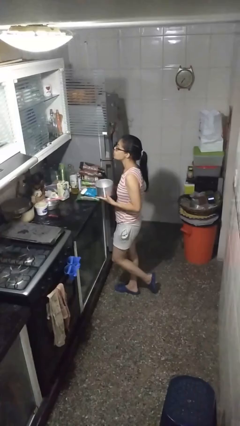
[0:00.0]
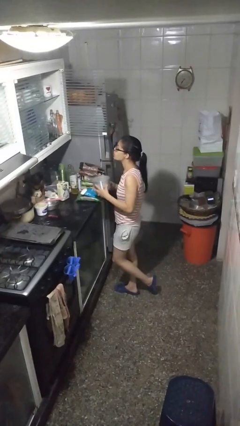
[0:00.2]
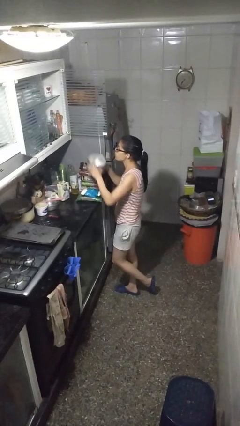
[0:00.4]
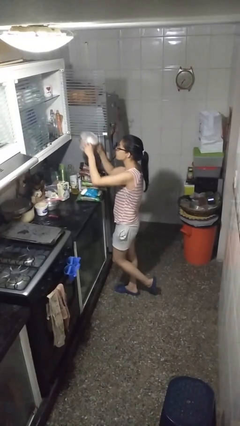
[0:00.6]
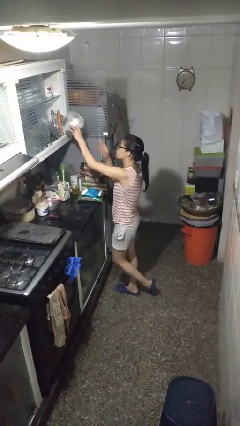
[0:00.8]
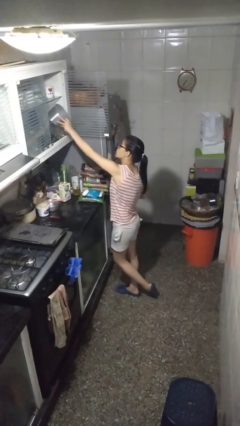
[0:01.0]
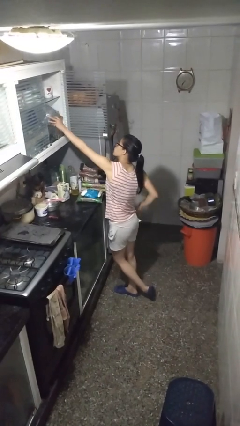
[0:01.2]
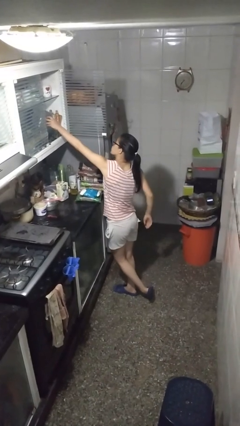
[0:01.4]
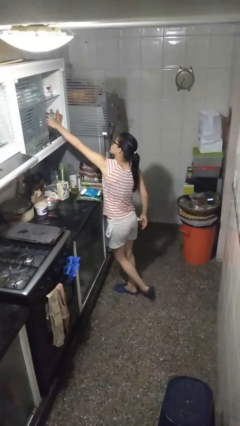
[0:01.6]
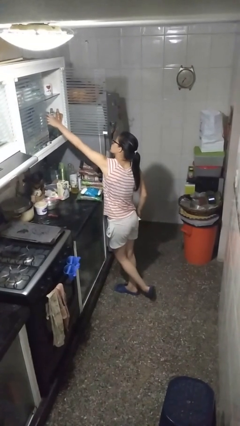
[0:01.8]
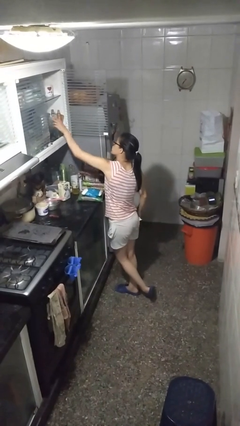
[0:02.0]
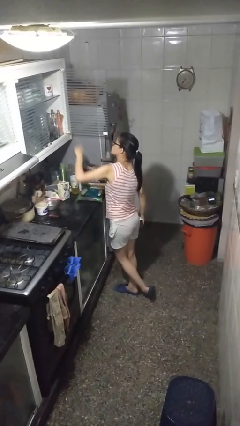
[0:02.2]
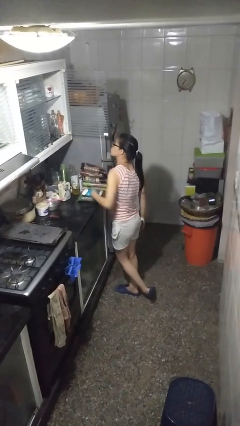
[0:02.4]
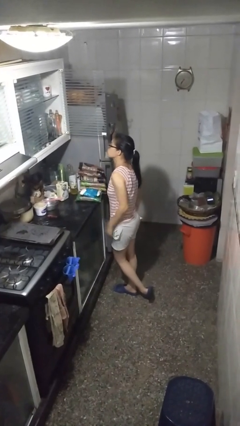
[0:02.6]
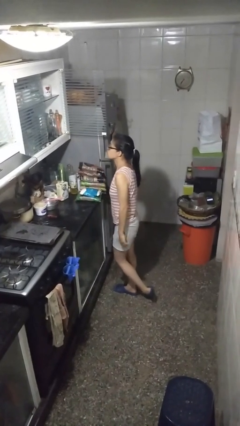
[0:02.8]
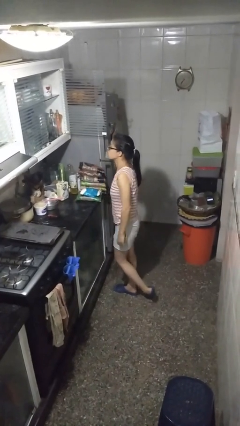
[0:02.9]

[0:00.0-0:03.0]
person puts down object into cabinet

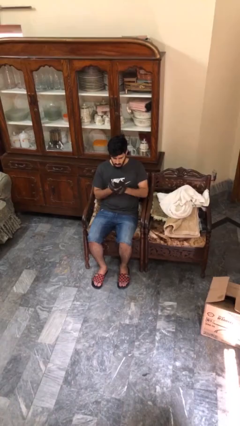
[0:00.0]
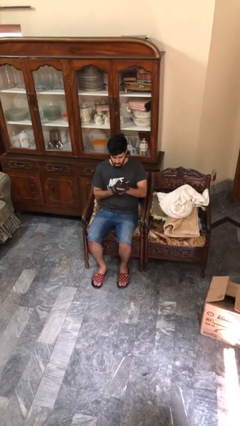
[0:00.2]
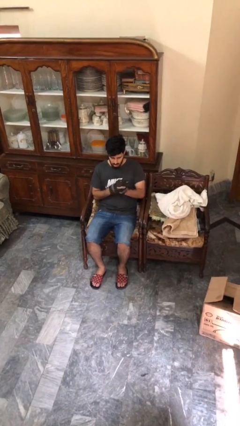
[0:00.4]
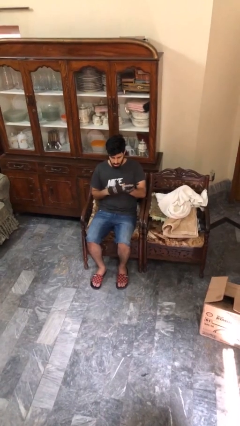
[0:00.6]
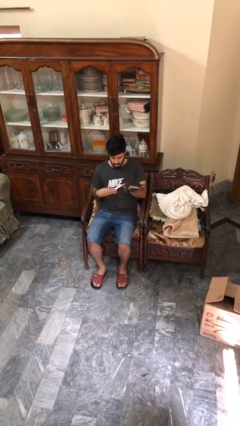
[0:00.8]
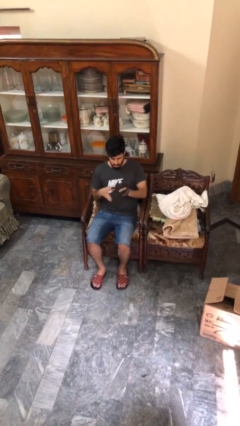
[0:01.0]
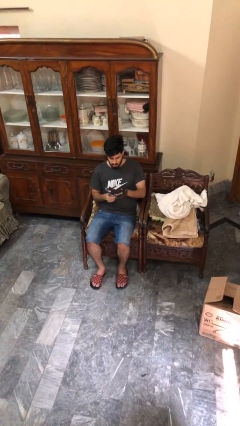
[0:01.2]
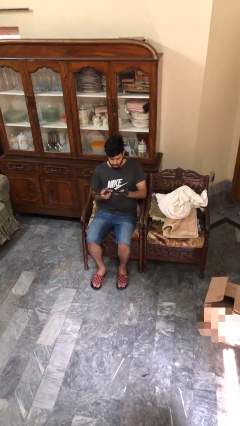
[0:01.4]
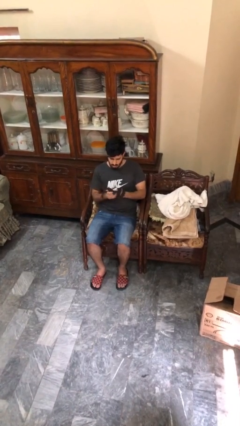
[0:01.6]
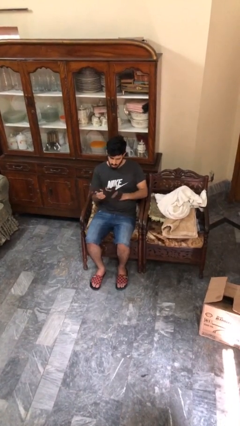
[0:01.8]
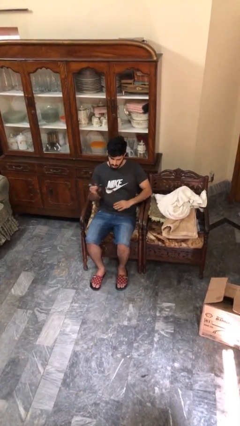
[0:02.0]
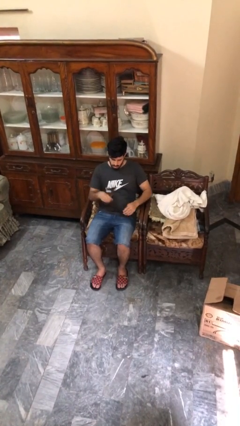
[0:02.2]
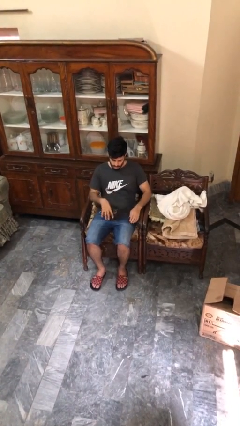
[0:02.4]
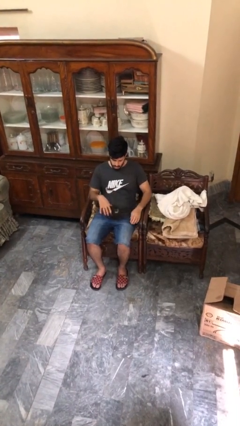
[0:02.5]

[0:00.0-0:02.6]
person takes off gloves

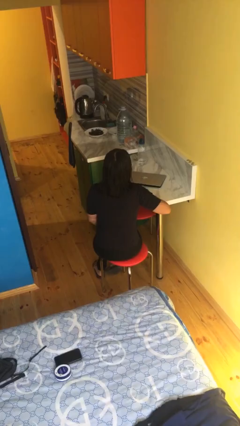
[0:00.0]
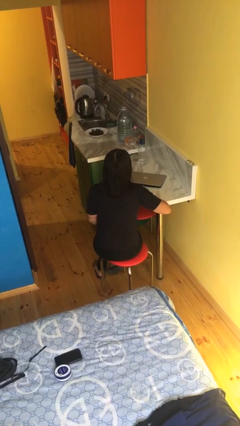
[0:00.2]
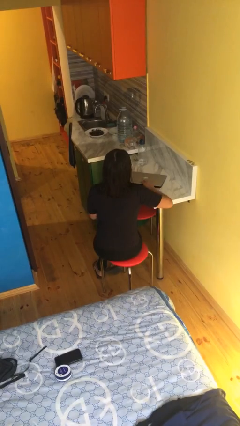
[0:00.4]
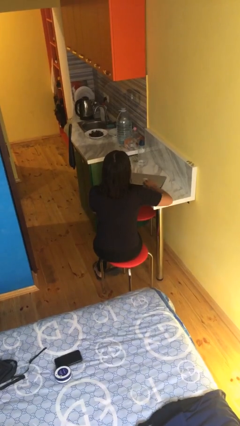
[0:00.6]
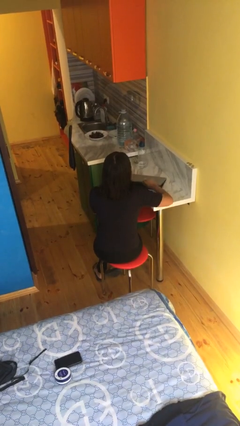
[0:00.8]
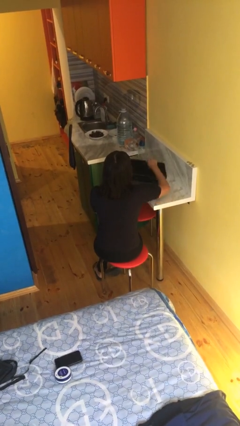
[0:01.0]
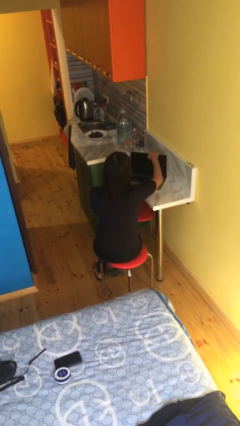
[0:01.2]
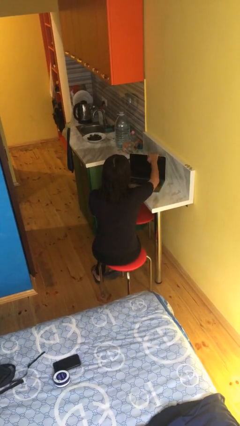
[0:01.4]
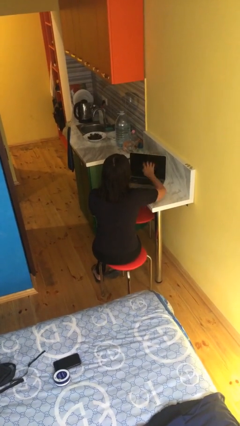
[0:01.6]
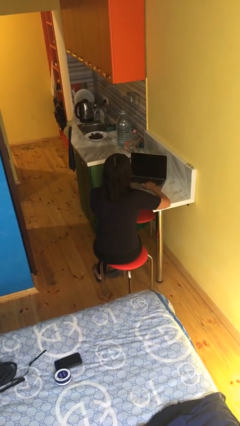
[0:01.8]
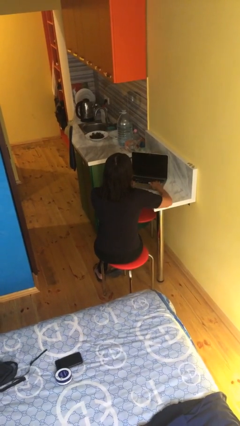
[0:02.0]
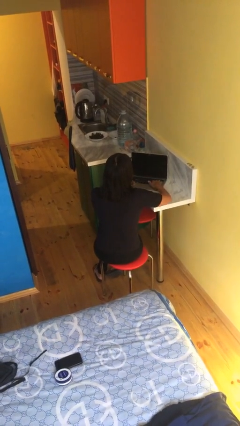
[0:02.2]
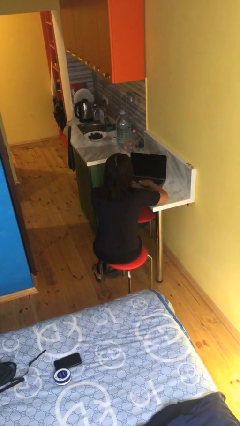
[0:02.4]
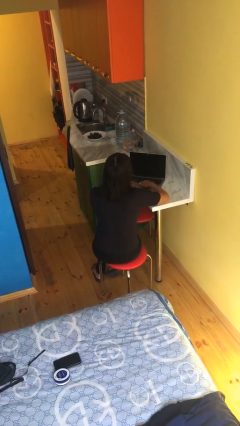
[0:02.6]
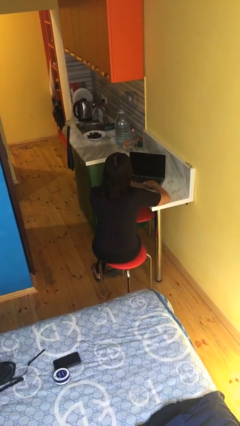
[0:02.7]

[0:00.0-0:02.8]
person opens laptop

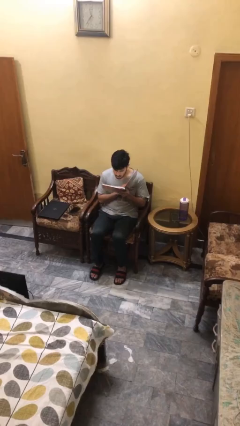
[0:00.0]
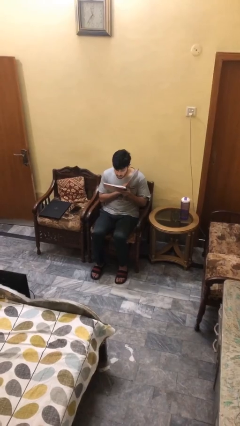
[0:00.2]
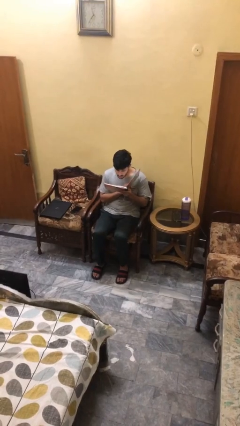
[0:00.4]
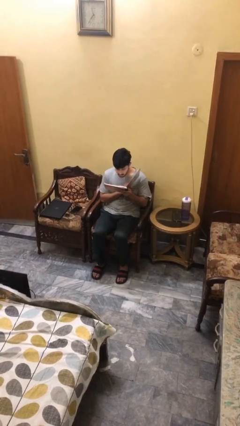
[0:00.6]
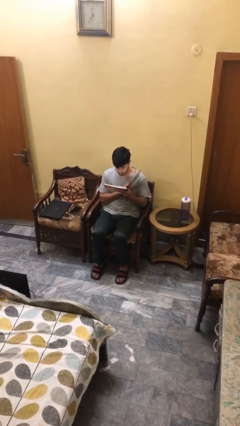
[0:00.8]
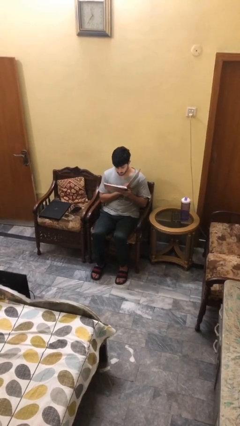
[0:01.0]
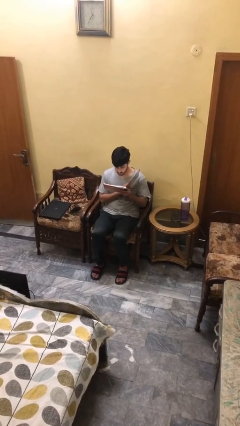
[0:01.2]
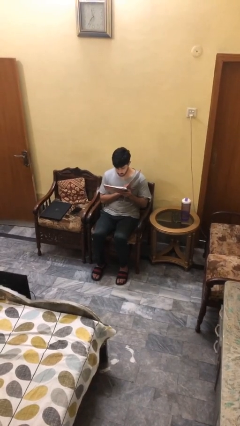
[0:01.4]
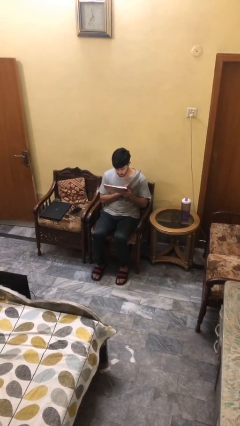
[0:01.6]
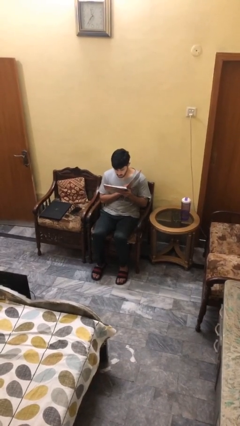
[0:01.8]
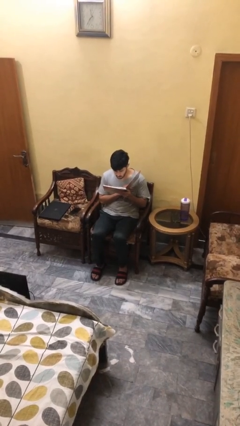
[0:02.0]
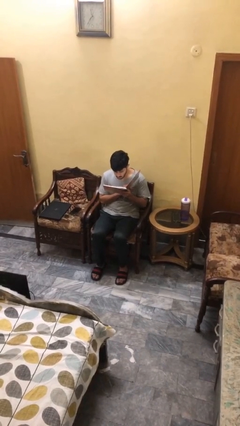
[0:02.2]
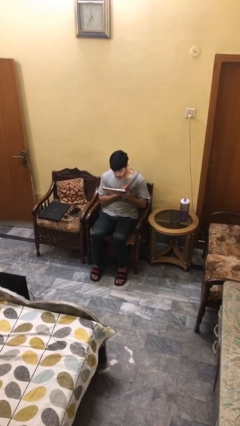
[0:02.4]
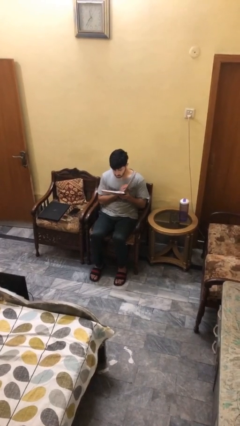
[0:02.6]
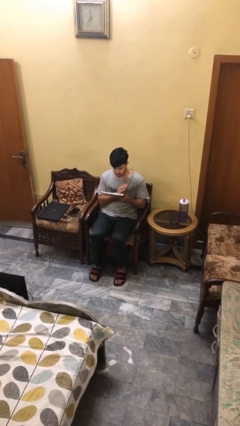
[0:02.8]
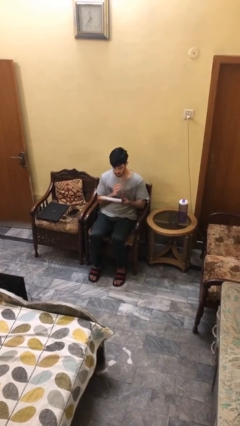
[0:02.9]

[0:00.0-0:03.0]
person reads document

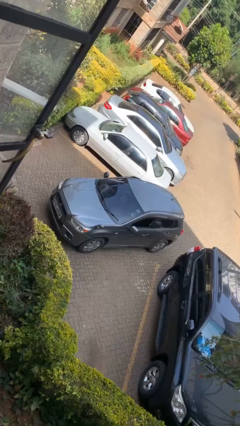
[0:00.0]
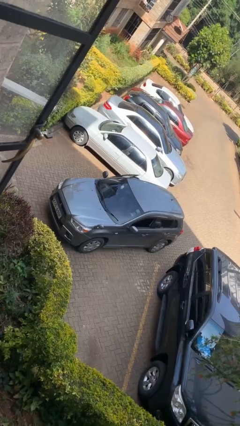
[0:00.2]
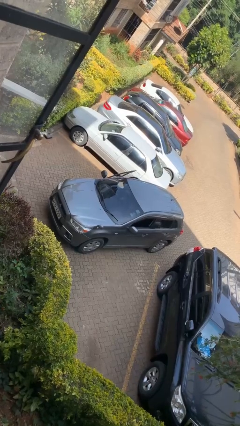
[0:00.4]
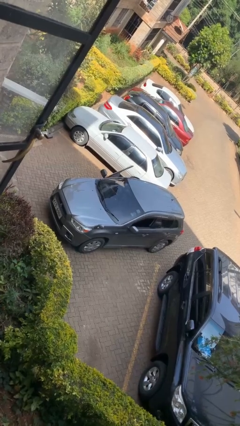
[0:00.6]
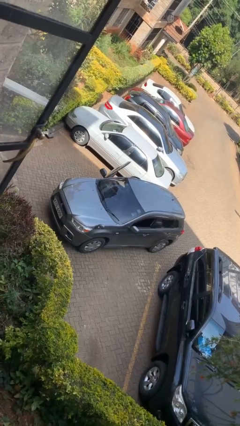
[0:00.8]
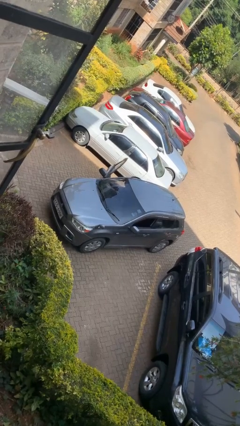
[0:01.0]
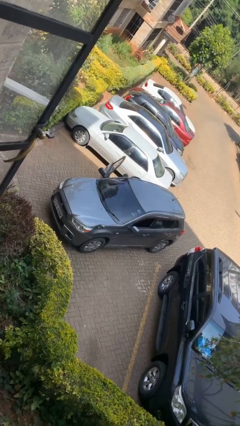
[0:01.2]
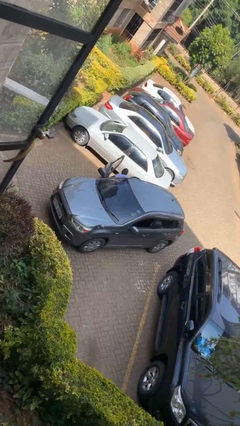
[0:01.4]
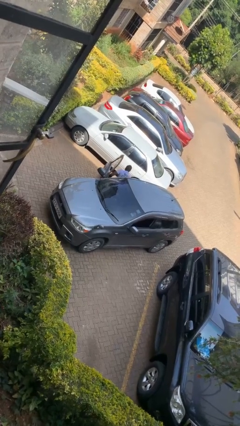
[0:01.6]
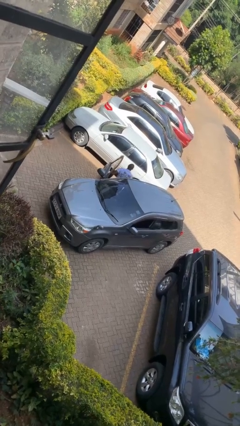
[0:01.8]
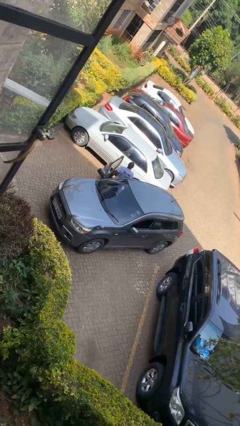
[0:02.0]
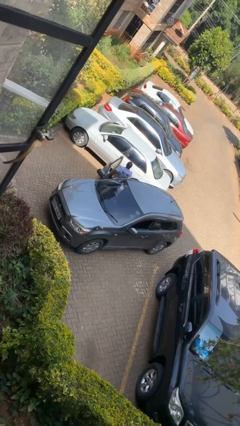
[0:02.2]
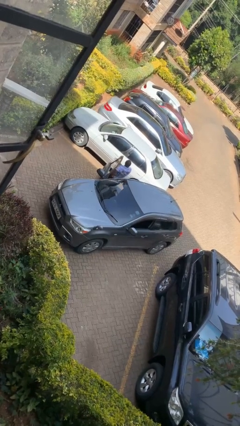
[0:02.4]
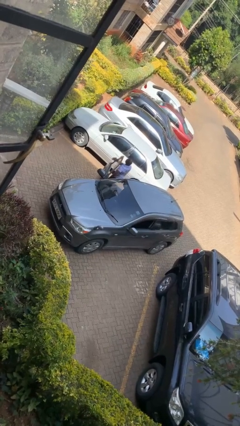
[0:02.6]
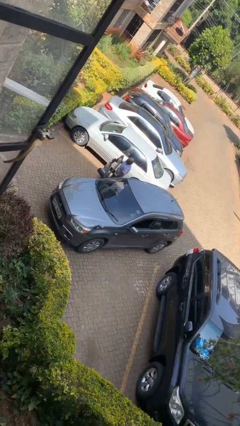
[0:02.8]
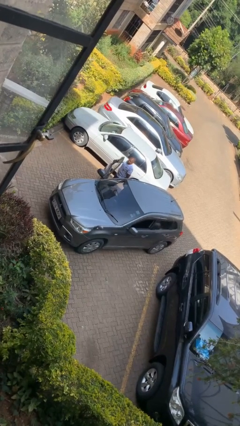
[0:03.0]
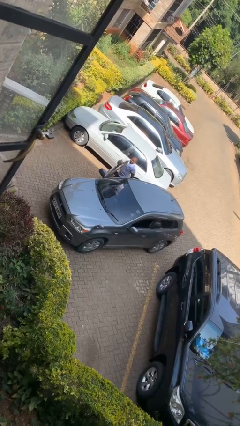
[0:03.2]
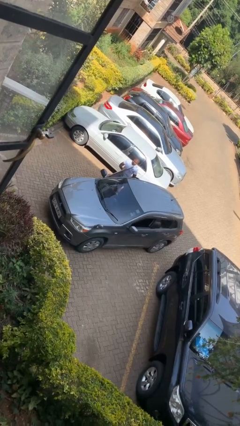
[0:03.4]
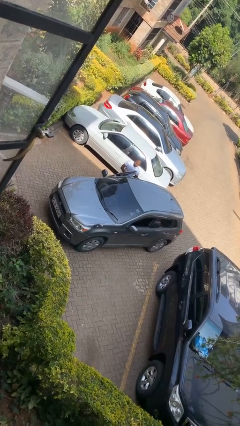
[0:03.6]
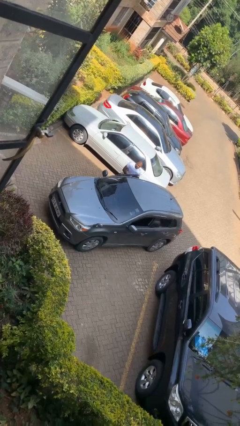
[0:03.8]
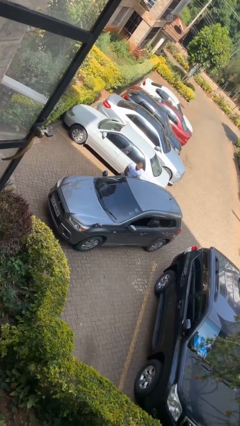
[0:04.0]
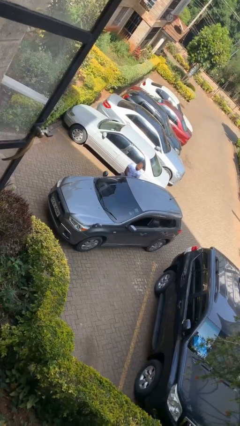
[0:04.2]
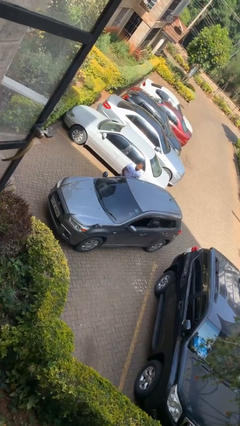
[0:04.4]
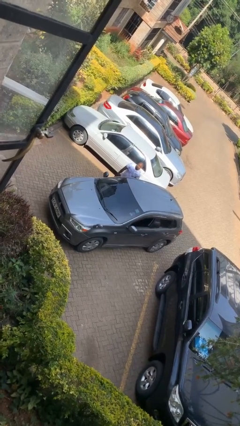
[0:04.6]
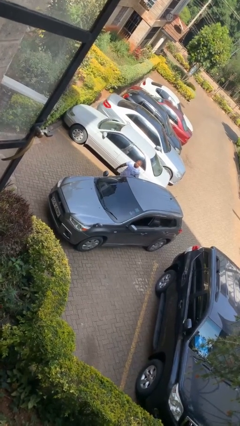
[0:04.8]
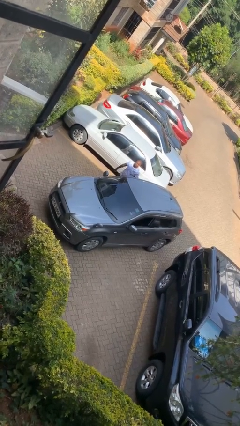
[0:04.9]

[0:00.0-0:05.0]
car drops off person

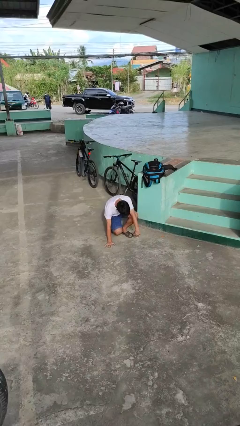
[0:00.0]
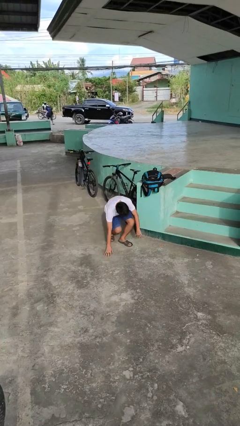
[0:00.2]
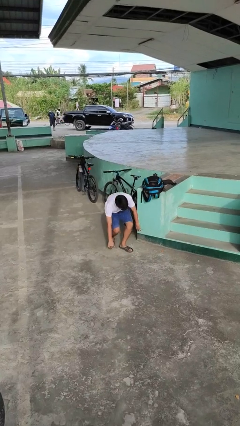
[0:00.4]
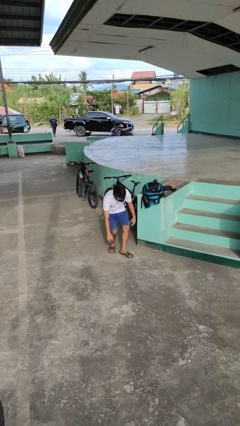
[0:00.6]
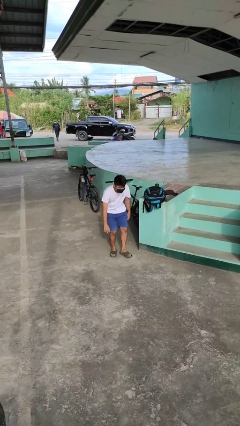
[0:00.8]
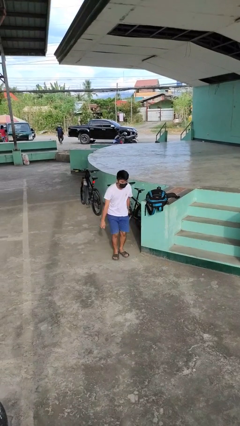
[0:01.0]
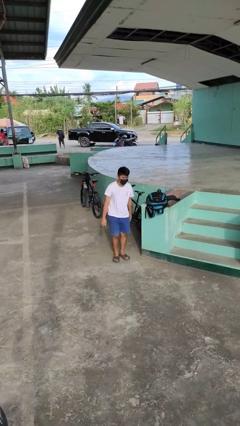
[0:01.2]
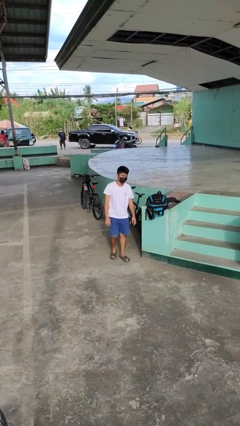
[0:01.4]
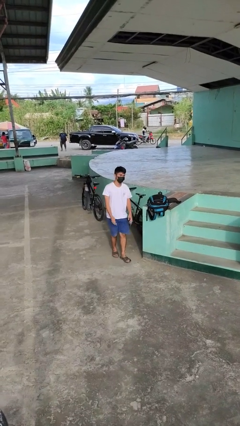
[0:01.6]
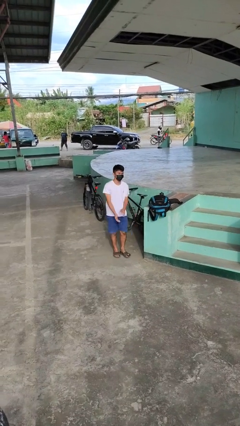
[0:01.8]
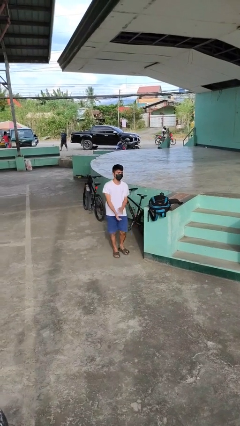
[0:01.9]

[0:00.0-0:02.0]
person stands up from floor
